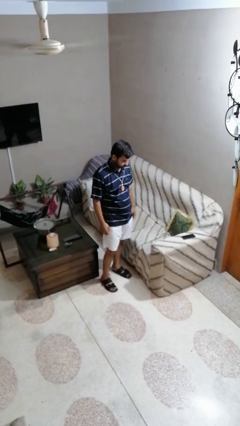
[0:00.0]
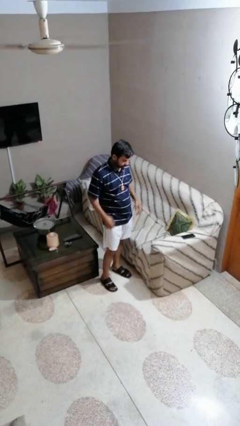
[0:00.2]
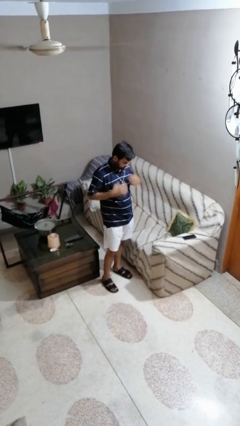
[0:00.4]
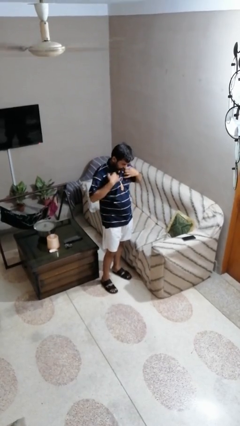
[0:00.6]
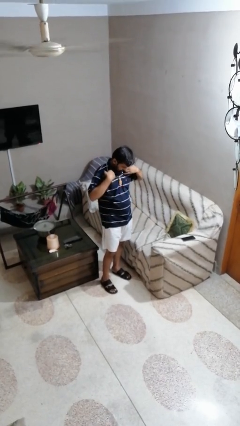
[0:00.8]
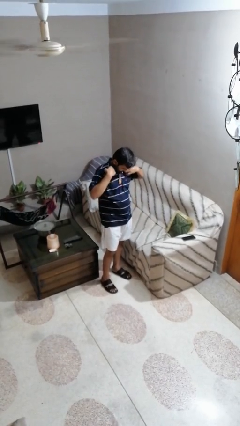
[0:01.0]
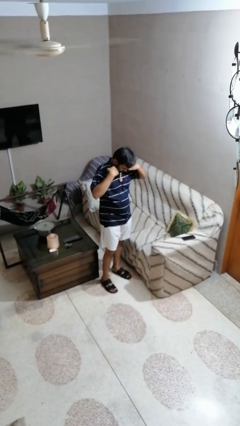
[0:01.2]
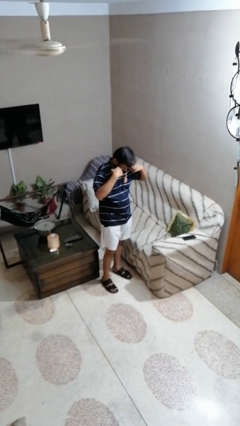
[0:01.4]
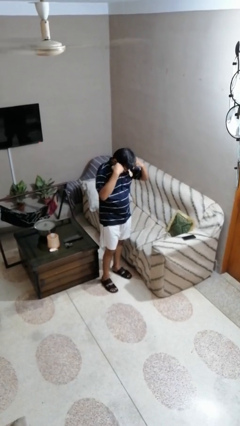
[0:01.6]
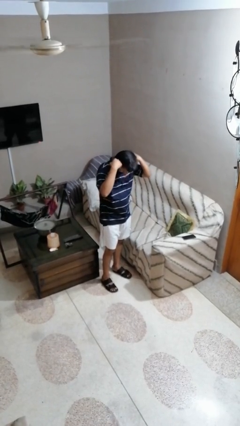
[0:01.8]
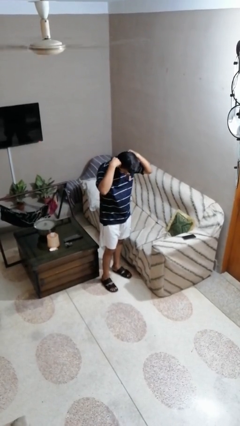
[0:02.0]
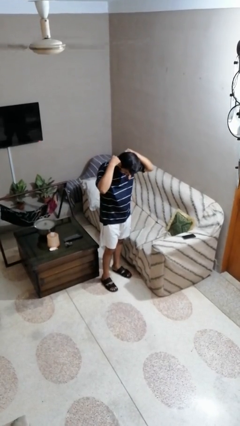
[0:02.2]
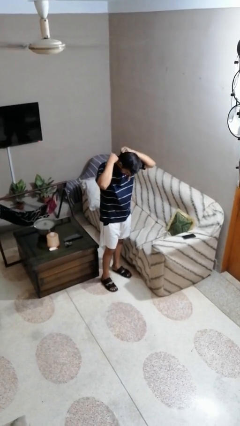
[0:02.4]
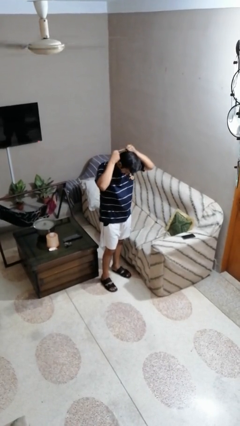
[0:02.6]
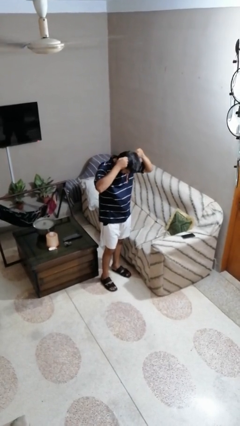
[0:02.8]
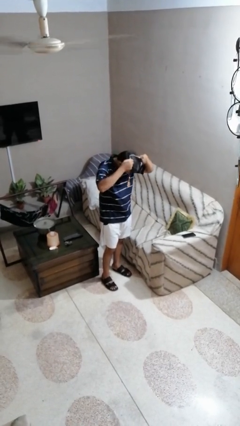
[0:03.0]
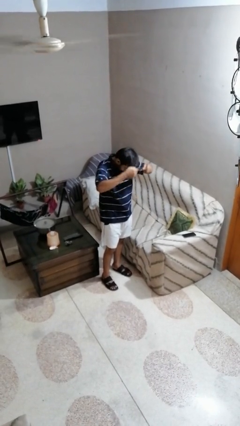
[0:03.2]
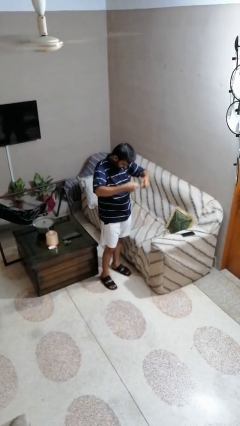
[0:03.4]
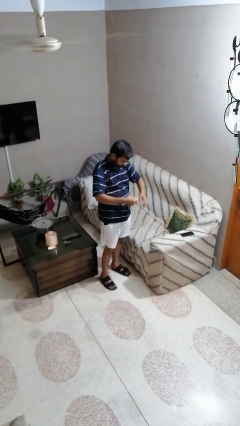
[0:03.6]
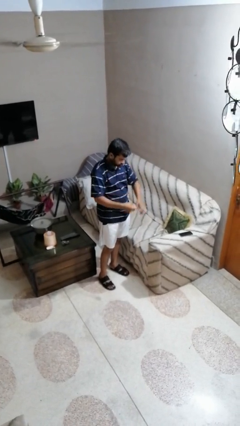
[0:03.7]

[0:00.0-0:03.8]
person takes off necklace

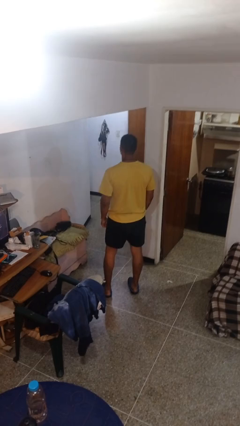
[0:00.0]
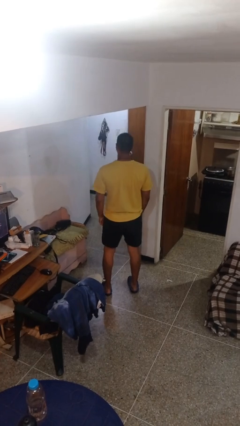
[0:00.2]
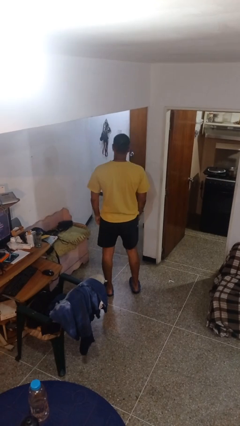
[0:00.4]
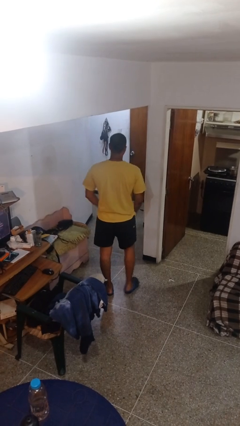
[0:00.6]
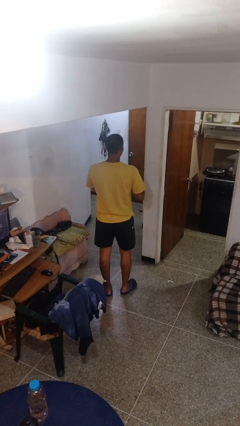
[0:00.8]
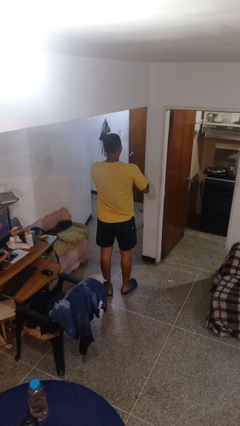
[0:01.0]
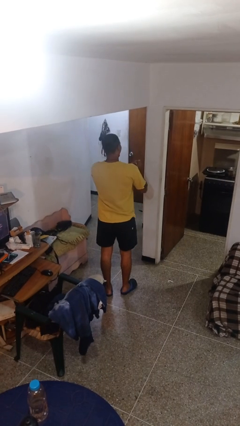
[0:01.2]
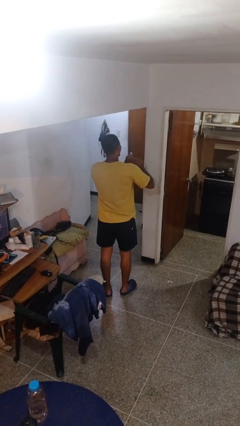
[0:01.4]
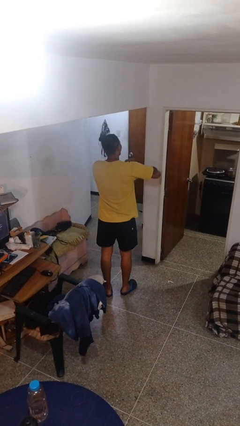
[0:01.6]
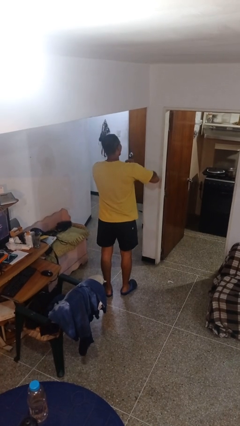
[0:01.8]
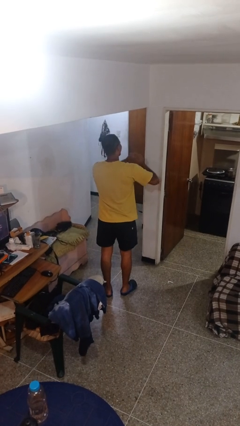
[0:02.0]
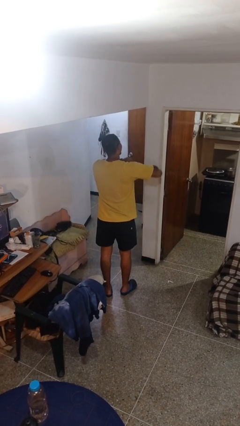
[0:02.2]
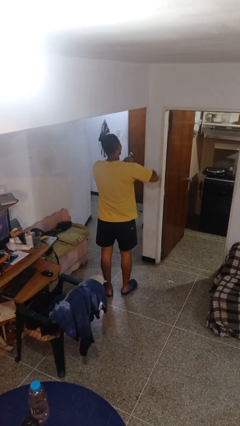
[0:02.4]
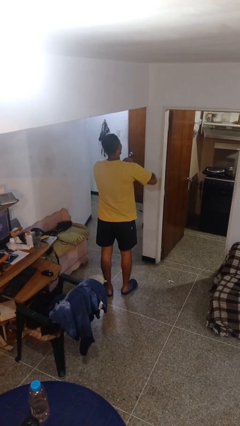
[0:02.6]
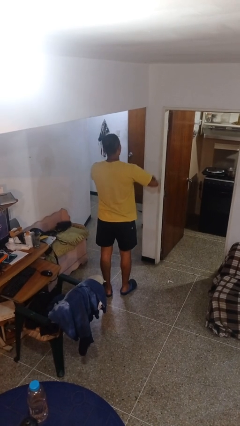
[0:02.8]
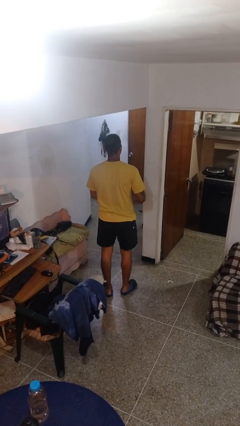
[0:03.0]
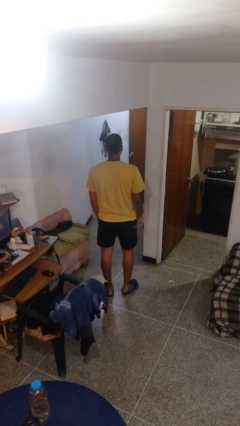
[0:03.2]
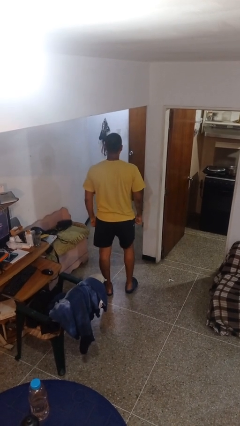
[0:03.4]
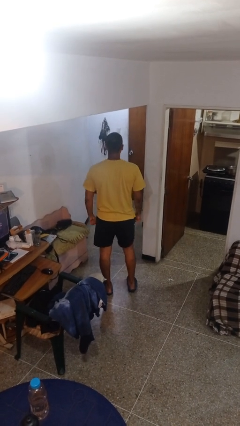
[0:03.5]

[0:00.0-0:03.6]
person cracks knuckles

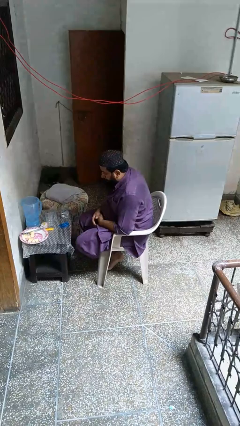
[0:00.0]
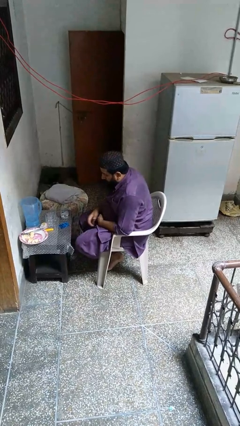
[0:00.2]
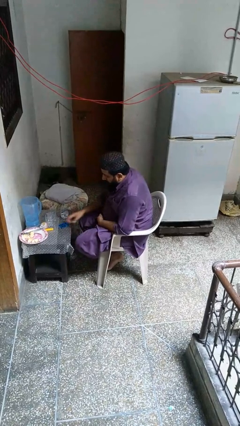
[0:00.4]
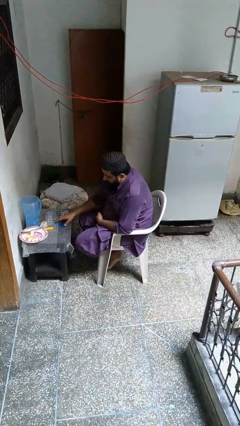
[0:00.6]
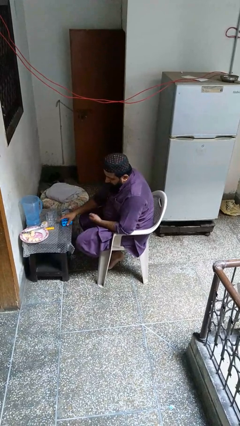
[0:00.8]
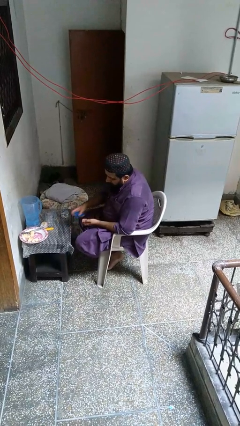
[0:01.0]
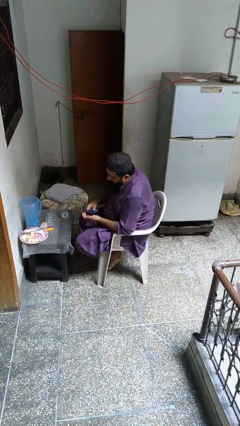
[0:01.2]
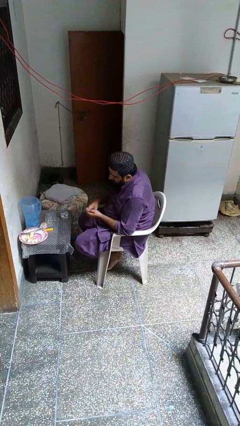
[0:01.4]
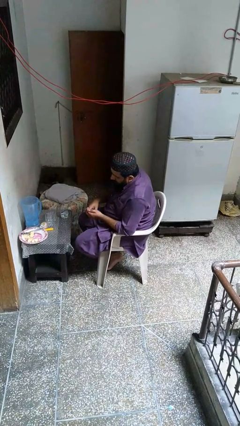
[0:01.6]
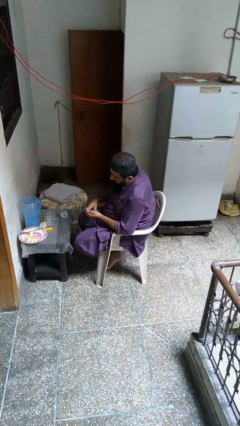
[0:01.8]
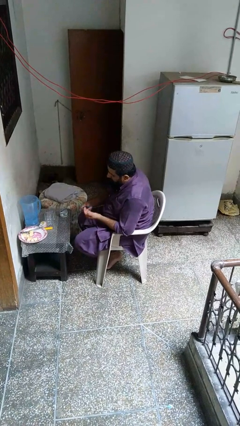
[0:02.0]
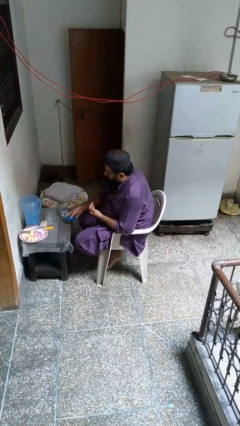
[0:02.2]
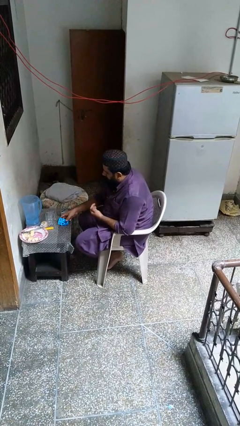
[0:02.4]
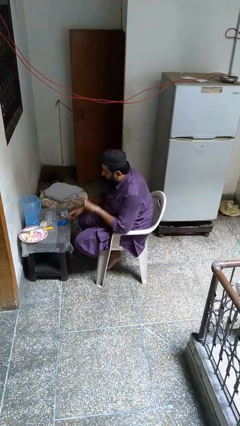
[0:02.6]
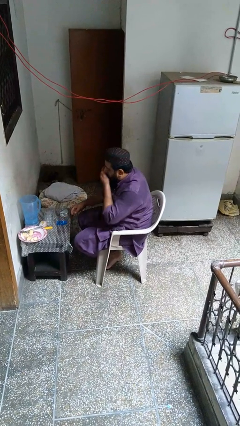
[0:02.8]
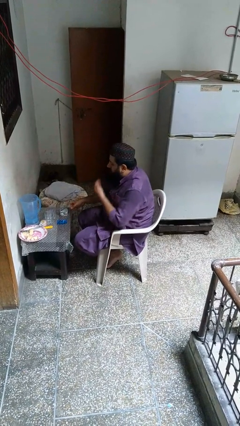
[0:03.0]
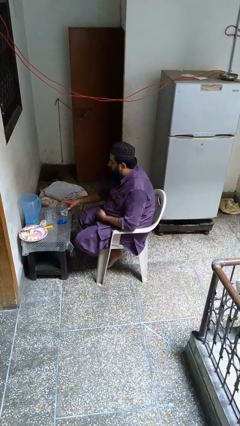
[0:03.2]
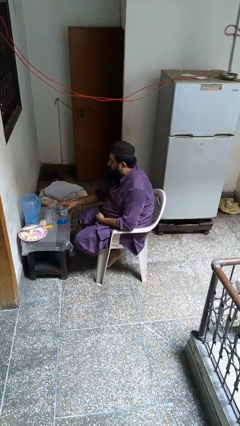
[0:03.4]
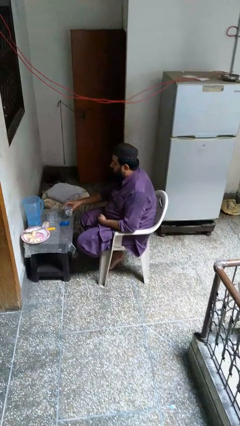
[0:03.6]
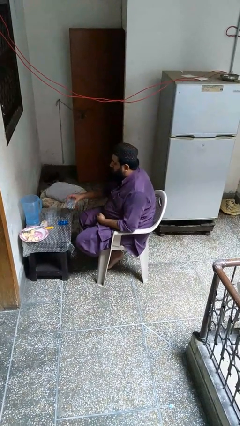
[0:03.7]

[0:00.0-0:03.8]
person takes medicine pills

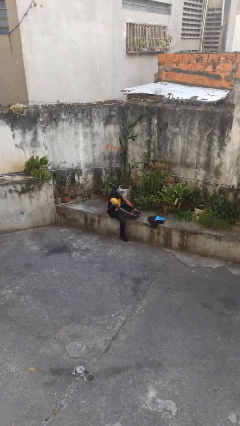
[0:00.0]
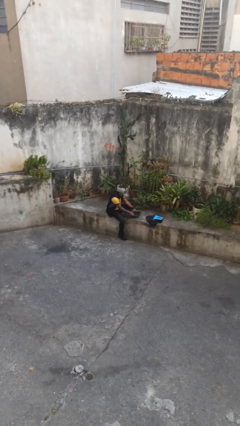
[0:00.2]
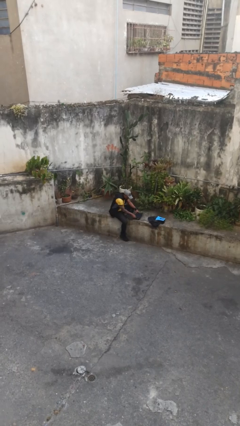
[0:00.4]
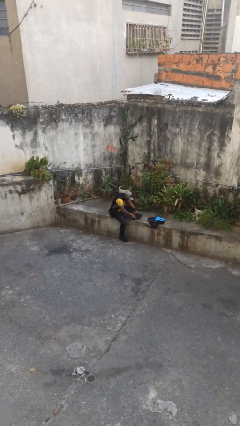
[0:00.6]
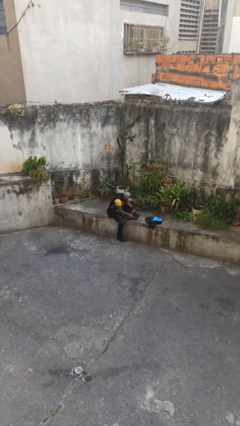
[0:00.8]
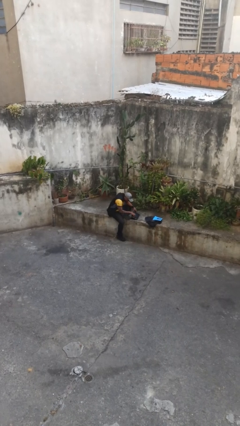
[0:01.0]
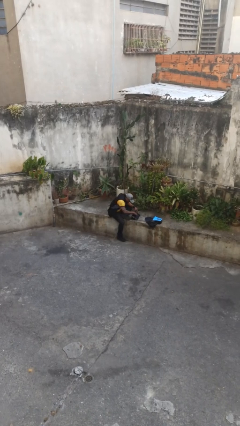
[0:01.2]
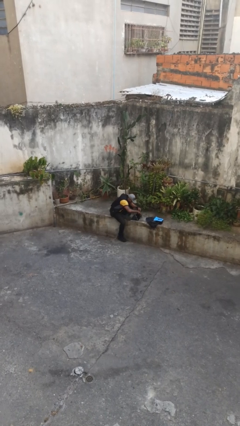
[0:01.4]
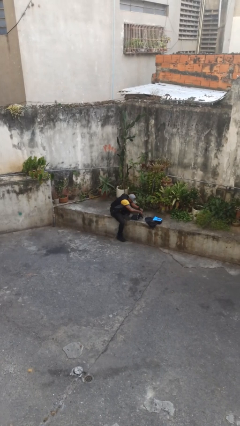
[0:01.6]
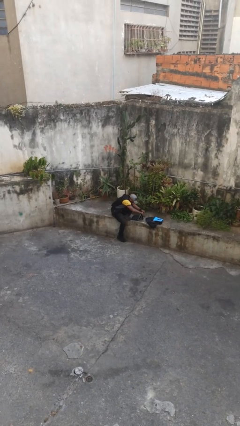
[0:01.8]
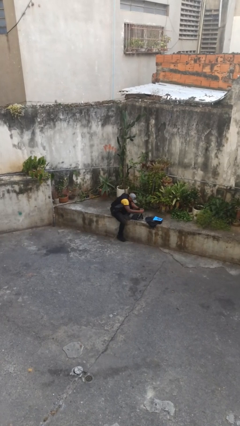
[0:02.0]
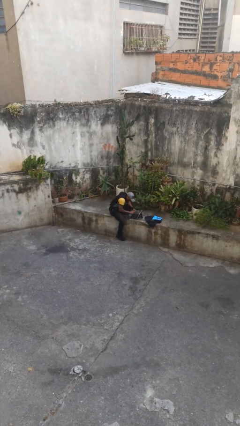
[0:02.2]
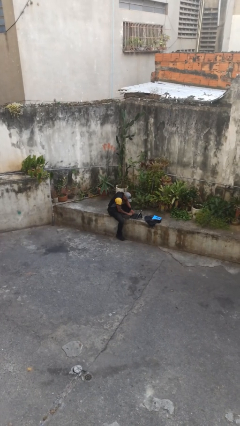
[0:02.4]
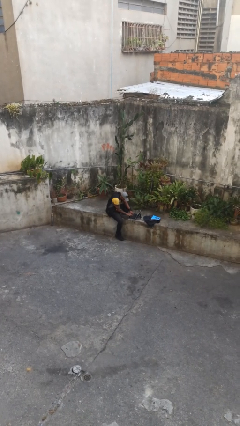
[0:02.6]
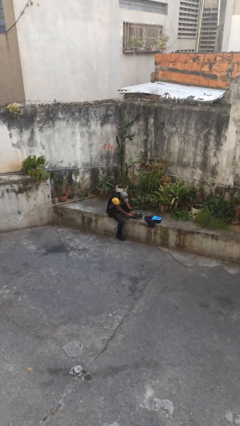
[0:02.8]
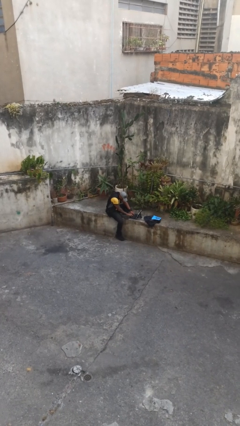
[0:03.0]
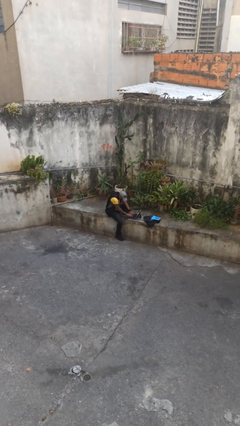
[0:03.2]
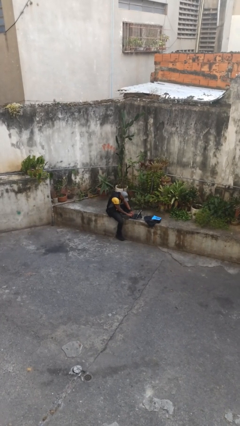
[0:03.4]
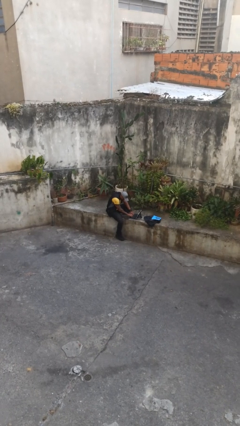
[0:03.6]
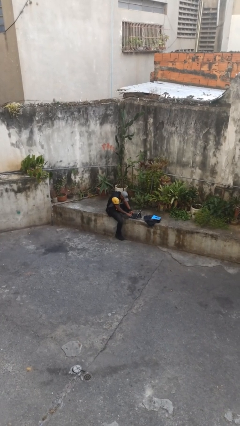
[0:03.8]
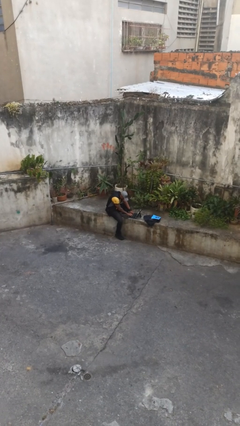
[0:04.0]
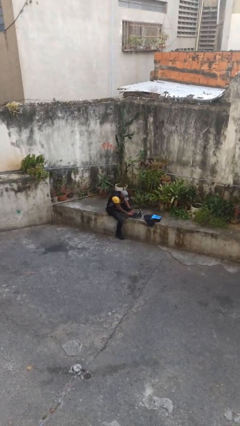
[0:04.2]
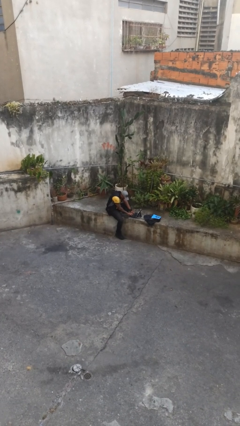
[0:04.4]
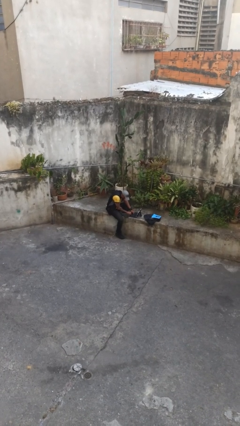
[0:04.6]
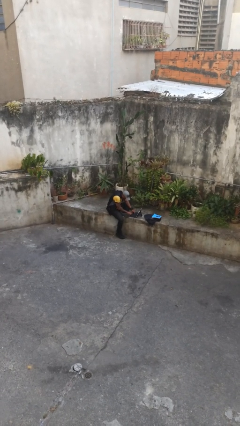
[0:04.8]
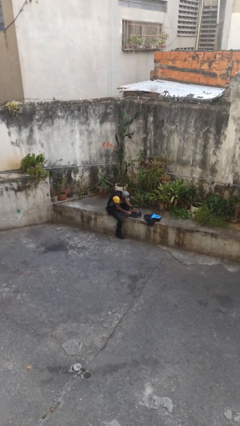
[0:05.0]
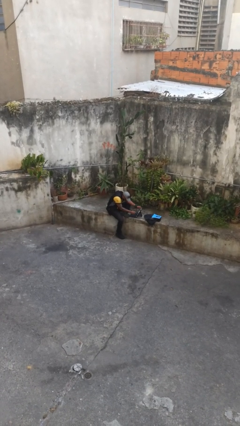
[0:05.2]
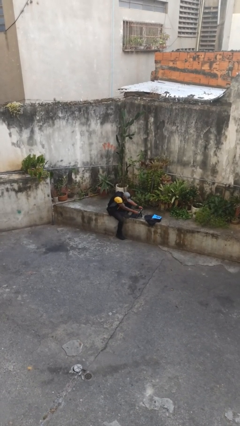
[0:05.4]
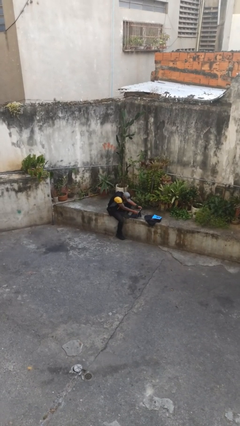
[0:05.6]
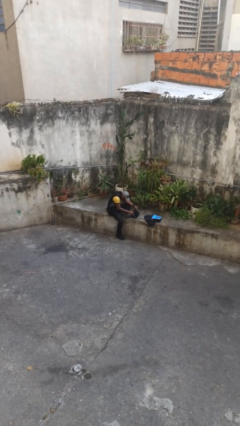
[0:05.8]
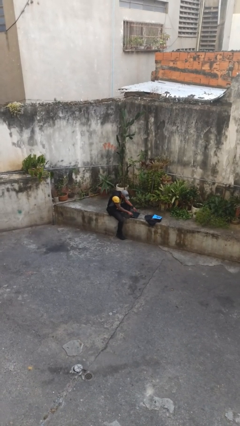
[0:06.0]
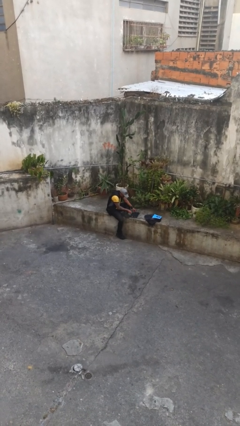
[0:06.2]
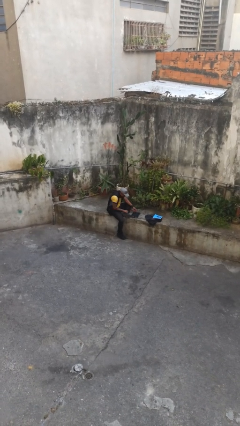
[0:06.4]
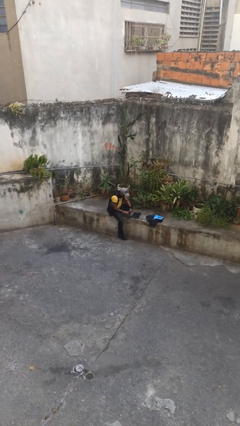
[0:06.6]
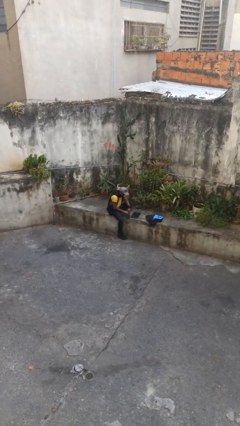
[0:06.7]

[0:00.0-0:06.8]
person interacts with laptop
